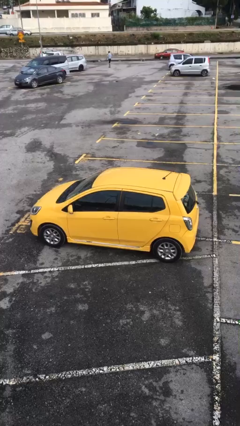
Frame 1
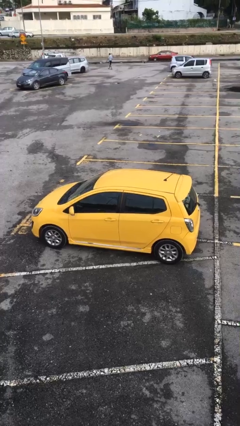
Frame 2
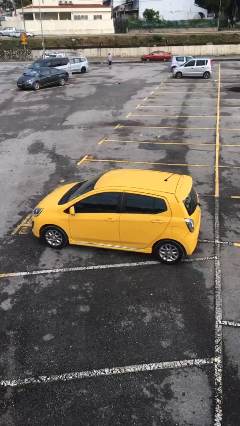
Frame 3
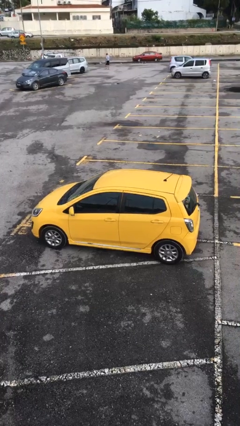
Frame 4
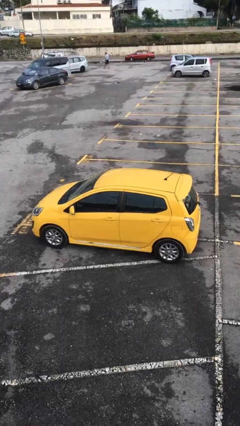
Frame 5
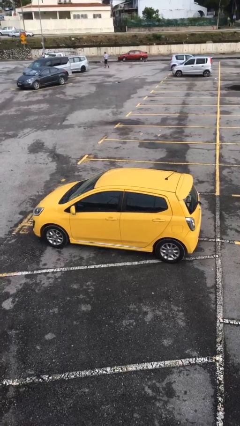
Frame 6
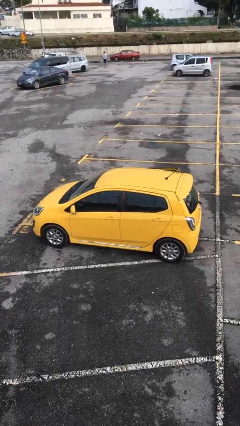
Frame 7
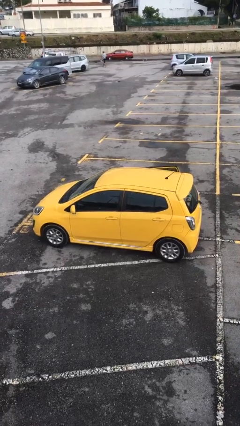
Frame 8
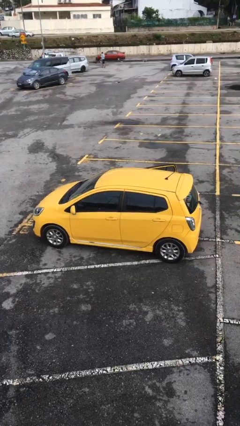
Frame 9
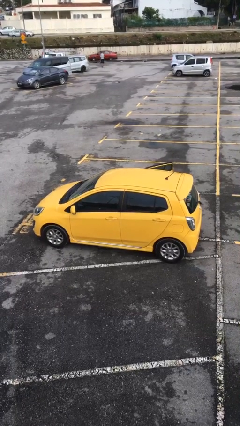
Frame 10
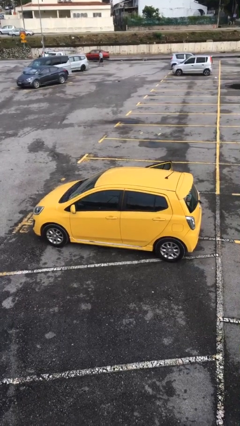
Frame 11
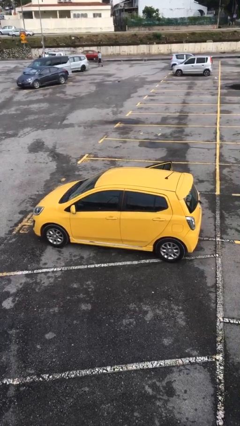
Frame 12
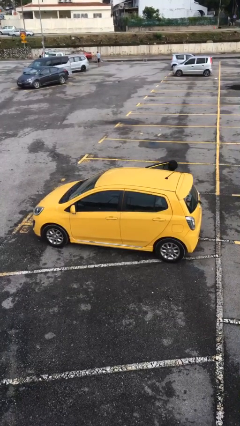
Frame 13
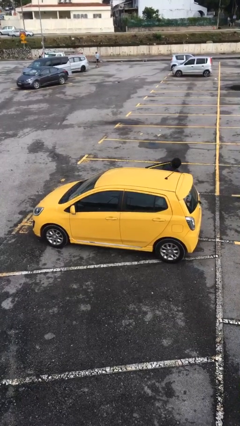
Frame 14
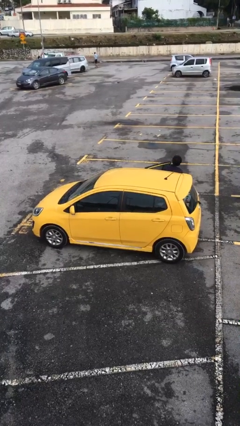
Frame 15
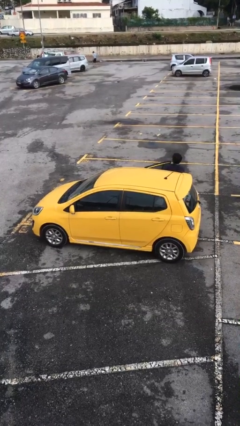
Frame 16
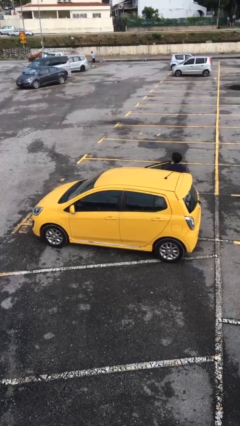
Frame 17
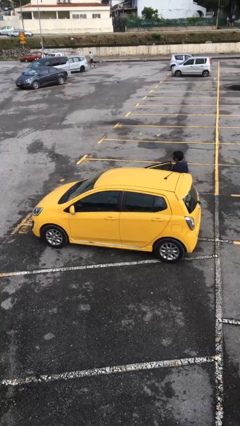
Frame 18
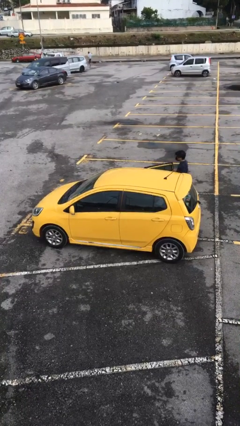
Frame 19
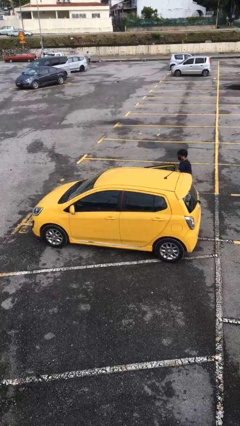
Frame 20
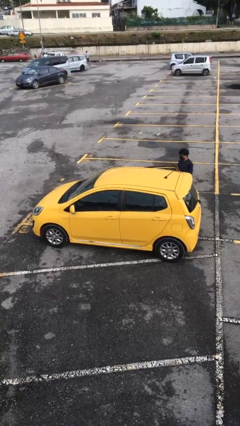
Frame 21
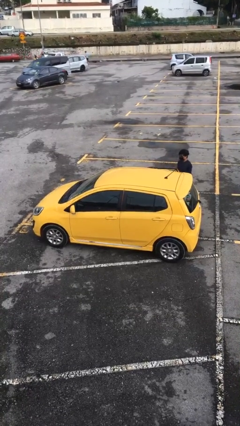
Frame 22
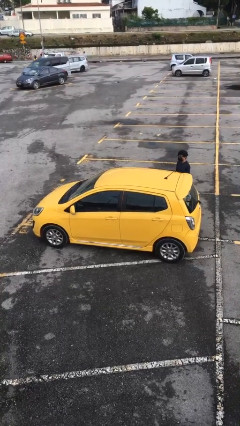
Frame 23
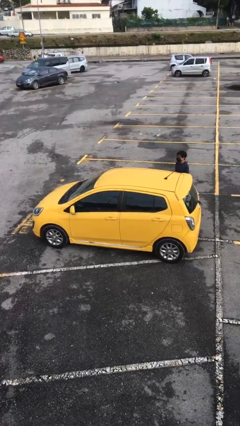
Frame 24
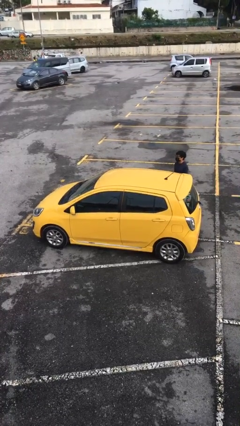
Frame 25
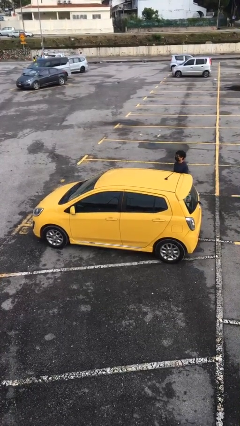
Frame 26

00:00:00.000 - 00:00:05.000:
car drops off person

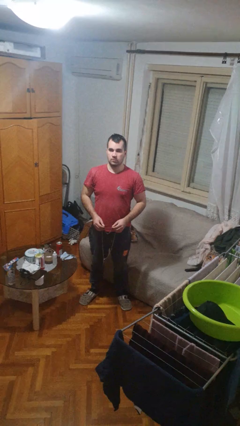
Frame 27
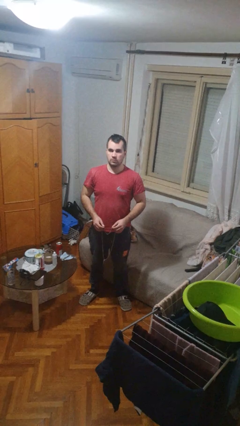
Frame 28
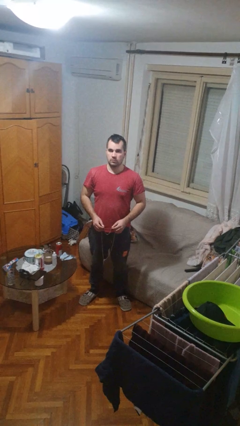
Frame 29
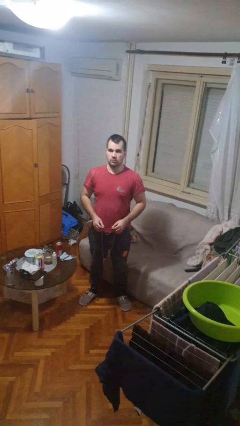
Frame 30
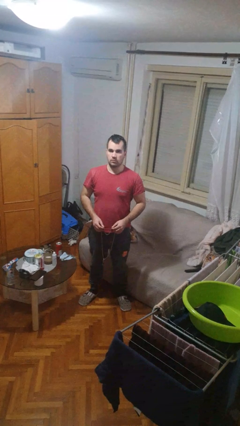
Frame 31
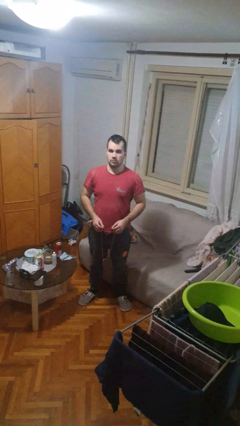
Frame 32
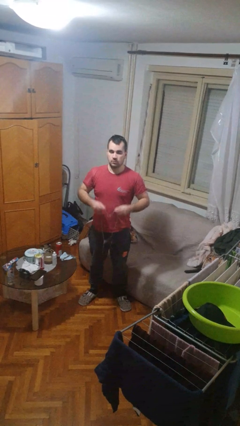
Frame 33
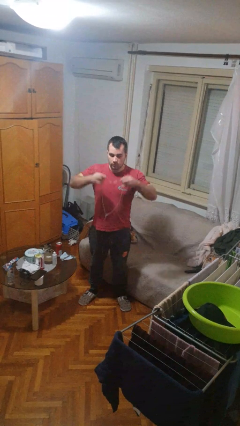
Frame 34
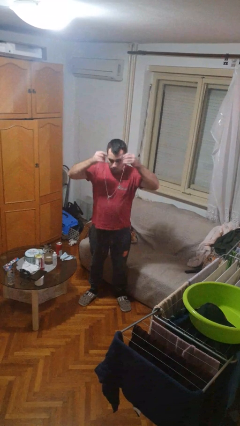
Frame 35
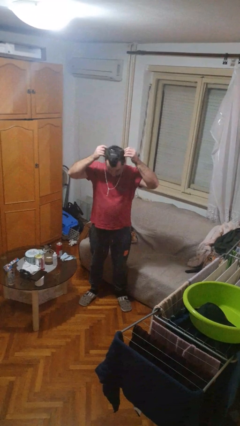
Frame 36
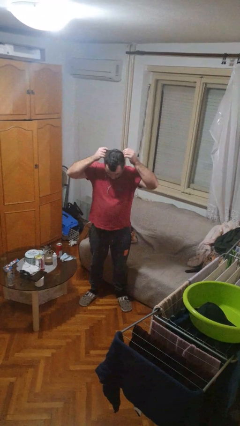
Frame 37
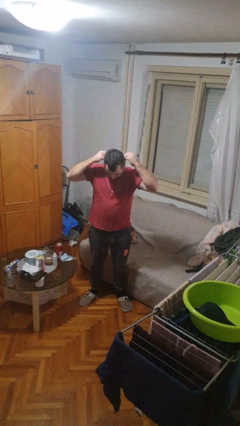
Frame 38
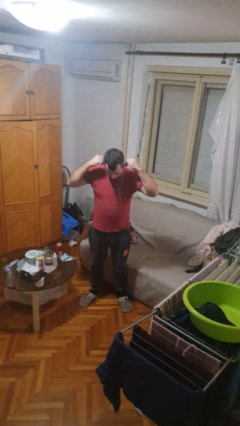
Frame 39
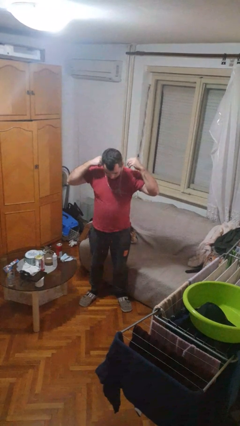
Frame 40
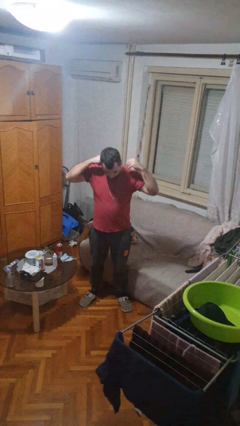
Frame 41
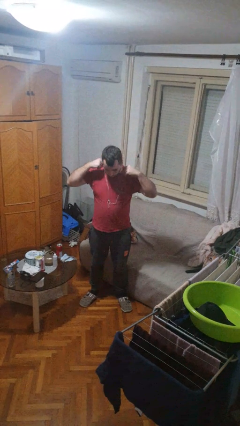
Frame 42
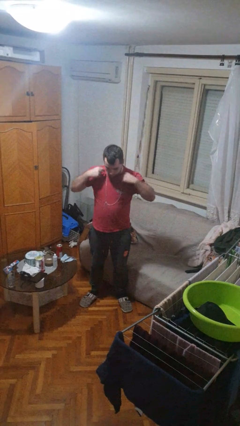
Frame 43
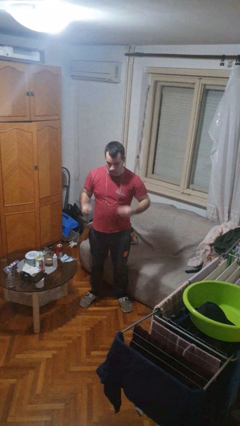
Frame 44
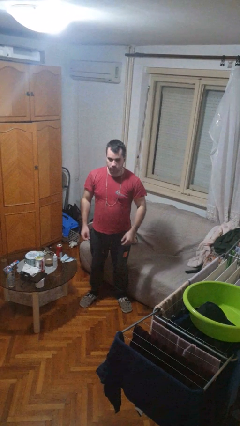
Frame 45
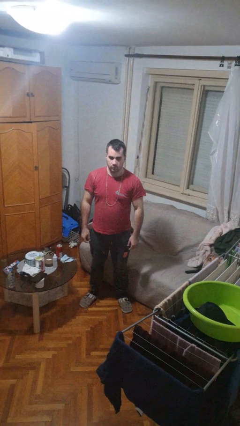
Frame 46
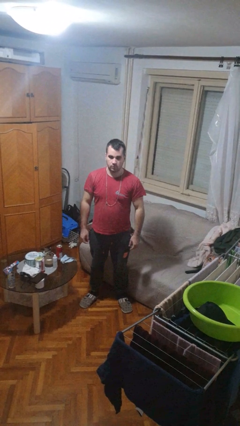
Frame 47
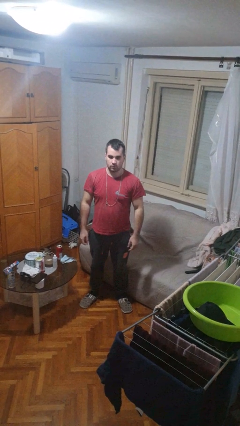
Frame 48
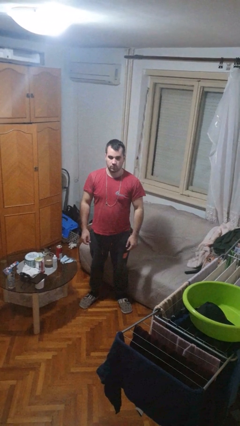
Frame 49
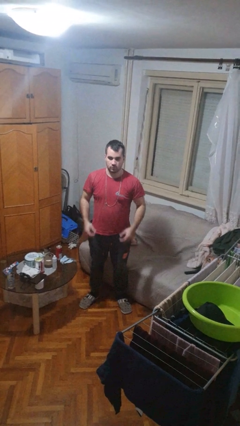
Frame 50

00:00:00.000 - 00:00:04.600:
person puts on necklace

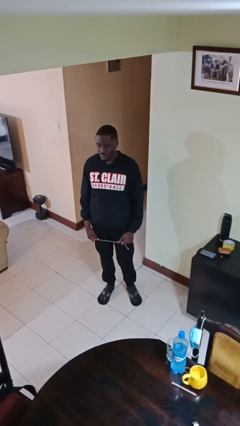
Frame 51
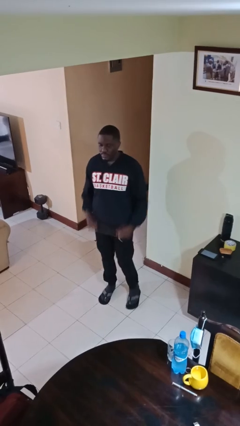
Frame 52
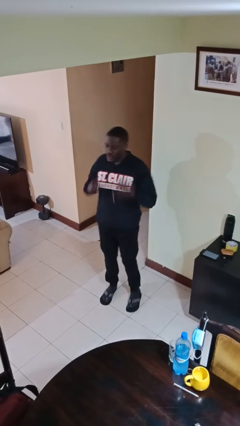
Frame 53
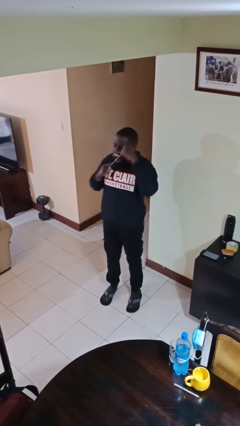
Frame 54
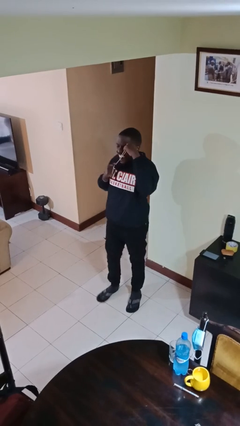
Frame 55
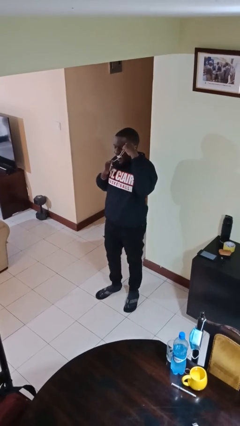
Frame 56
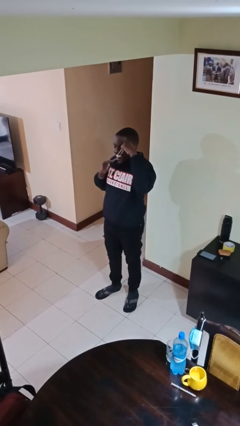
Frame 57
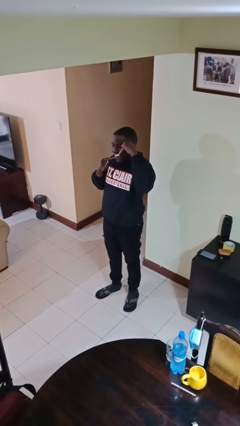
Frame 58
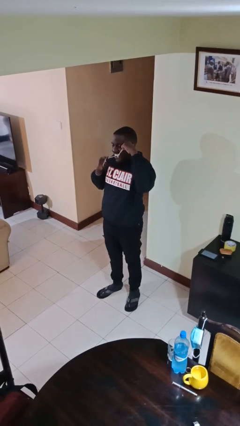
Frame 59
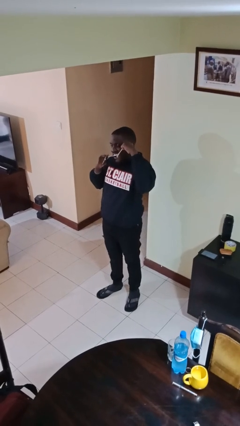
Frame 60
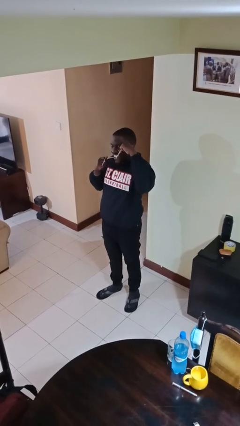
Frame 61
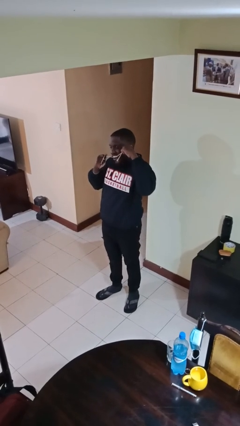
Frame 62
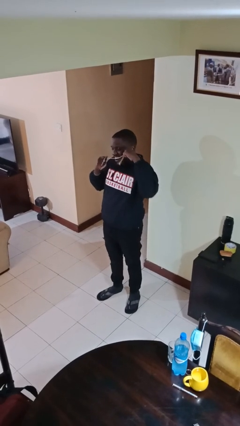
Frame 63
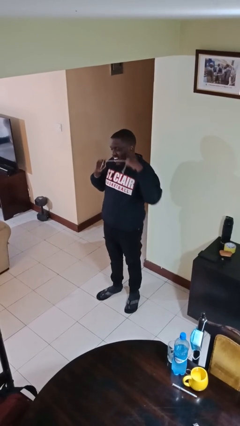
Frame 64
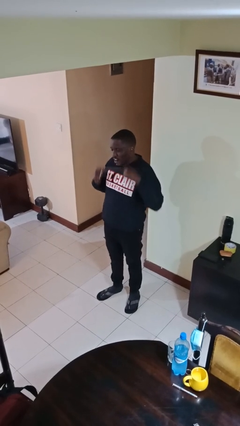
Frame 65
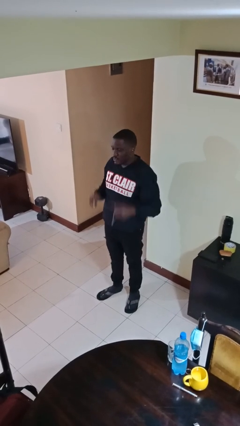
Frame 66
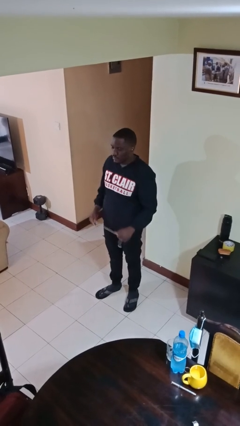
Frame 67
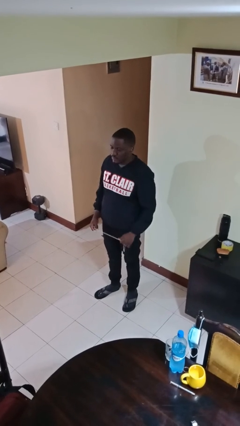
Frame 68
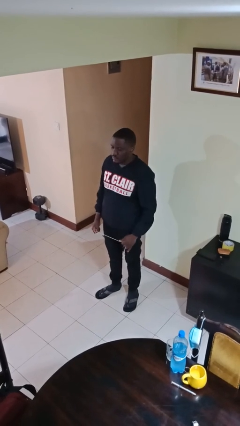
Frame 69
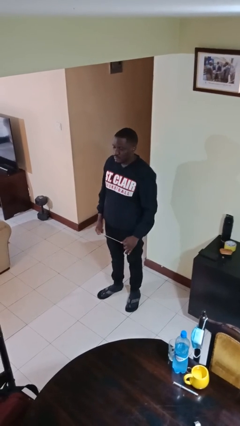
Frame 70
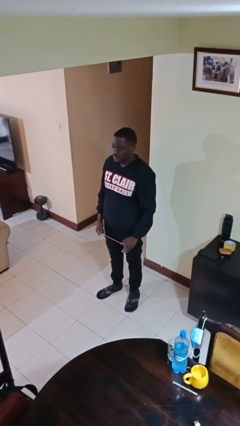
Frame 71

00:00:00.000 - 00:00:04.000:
person flosses

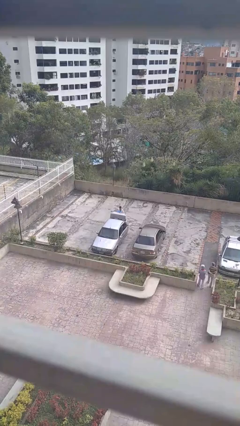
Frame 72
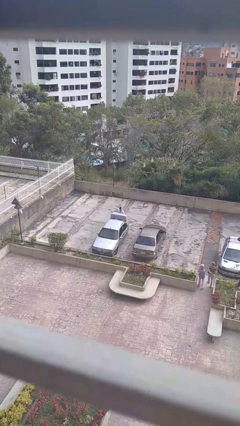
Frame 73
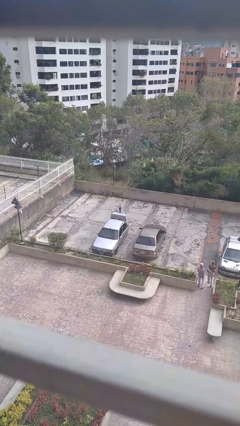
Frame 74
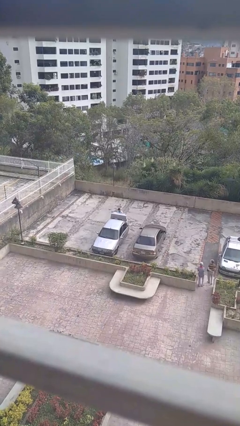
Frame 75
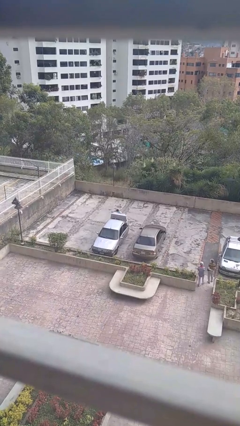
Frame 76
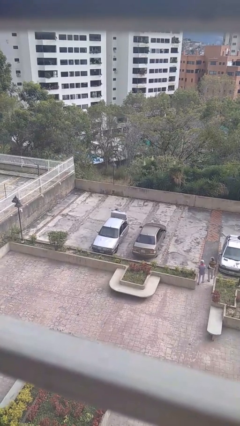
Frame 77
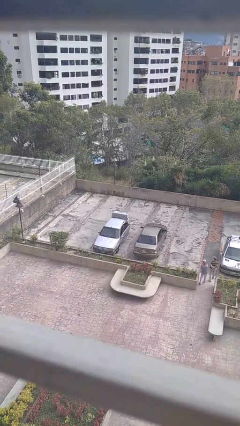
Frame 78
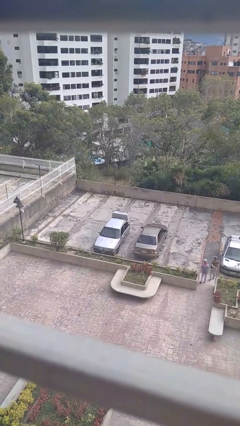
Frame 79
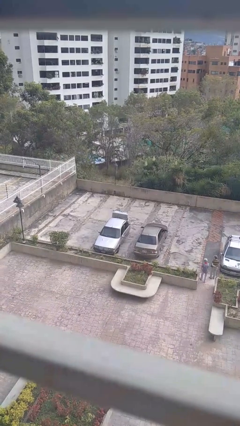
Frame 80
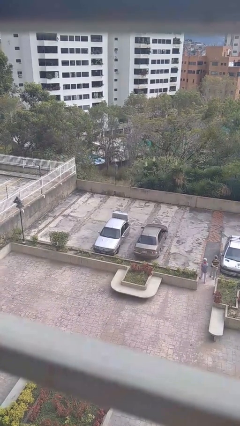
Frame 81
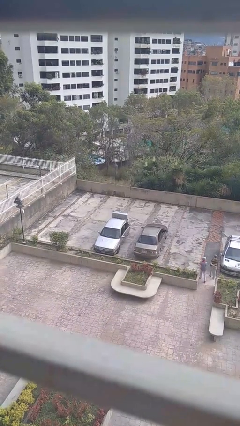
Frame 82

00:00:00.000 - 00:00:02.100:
person loads car

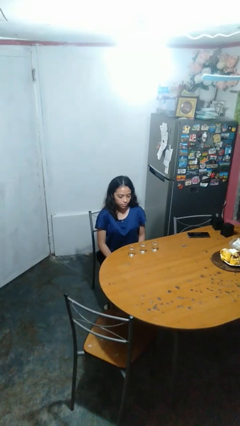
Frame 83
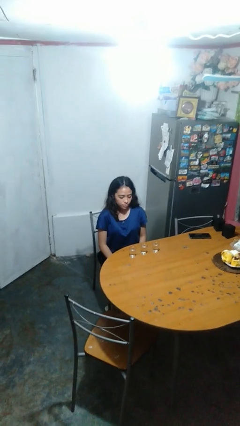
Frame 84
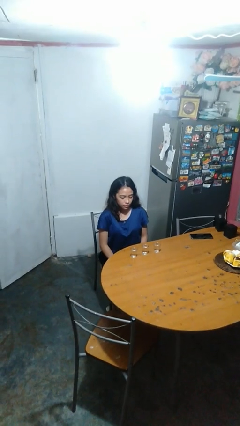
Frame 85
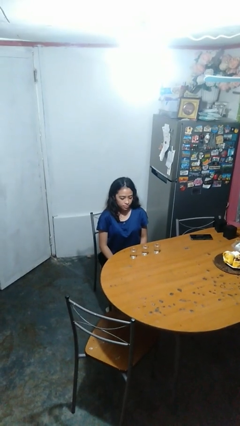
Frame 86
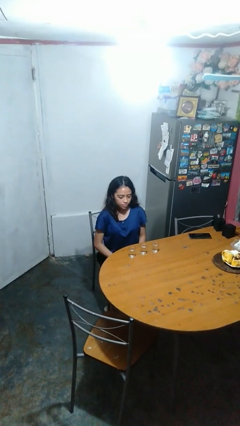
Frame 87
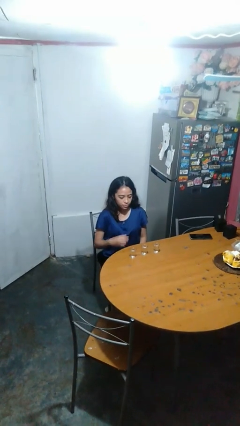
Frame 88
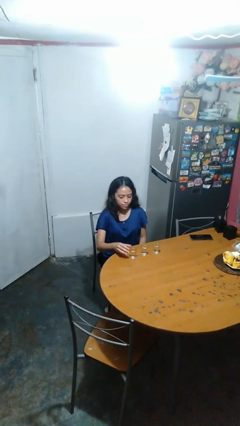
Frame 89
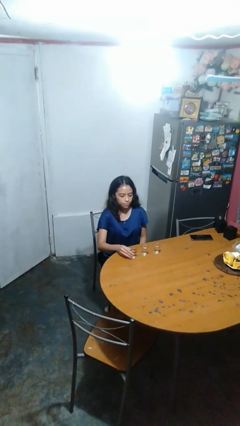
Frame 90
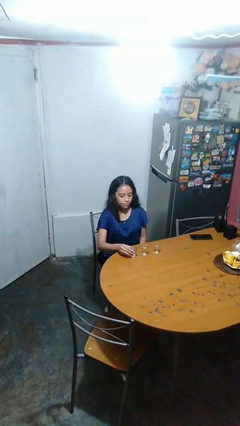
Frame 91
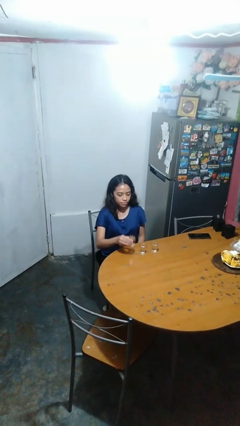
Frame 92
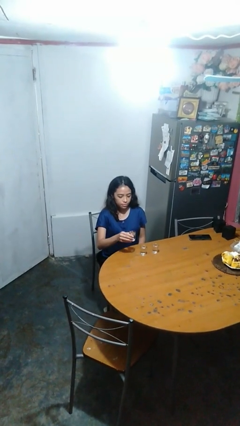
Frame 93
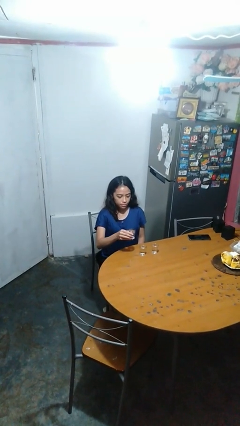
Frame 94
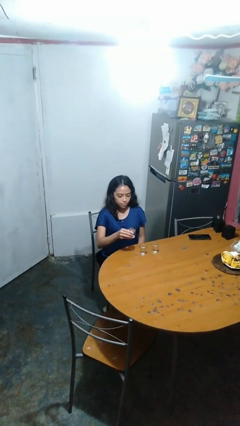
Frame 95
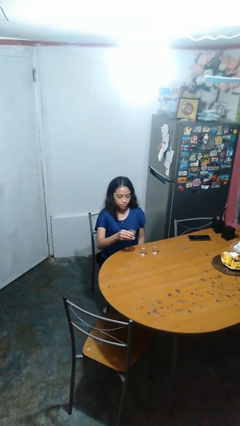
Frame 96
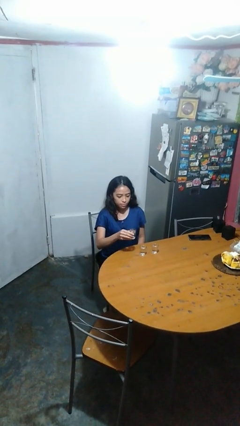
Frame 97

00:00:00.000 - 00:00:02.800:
person picks up object from table
